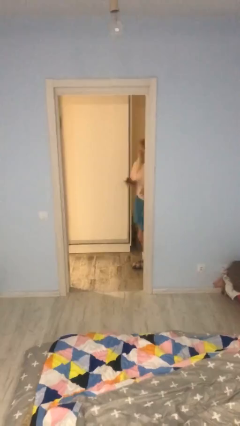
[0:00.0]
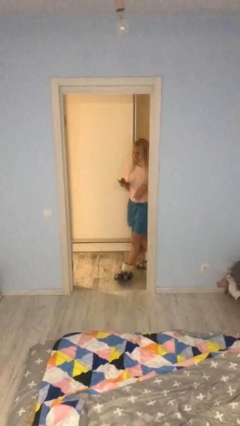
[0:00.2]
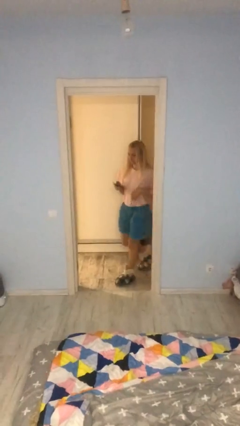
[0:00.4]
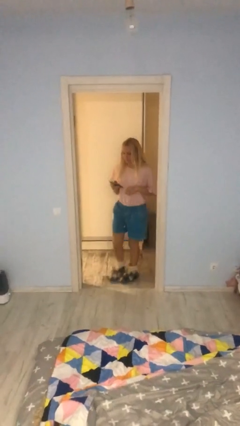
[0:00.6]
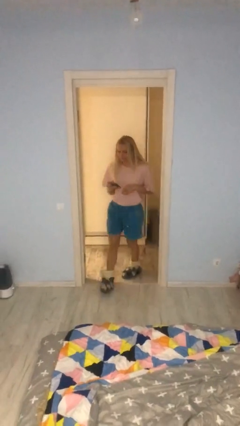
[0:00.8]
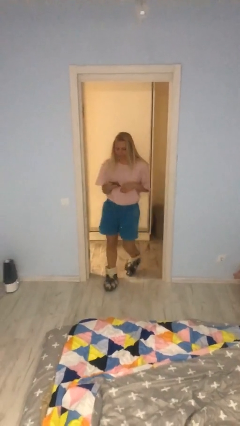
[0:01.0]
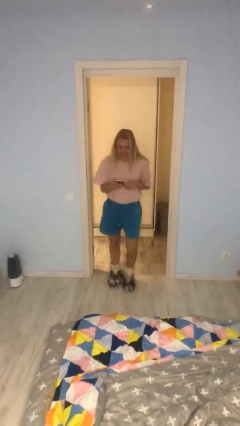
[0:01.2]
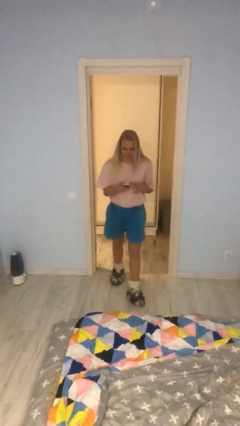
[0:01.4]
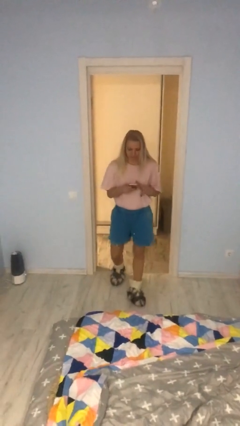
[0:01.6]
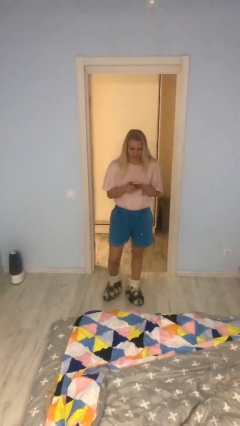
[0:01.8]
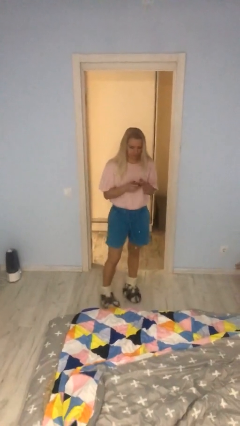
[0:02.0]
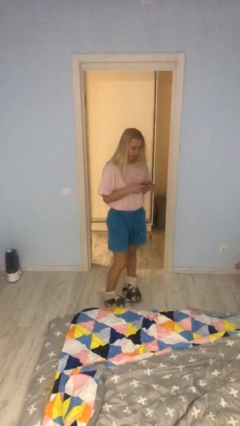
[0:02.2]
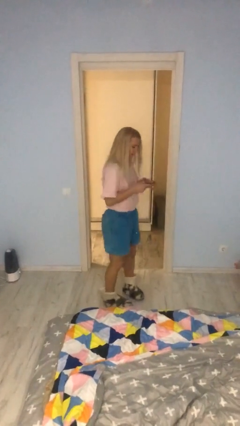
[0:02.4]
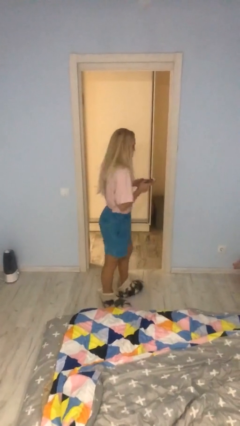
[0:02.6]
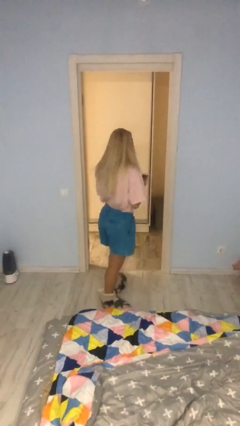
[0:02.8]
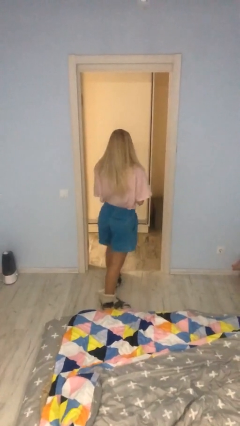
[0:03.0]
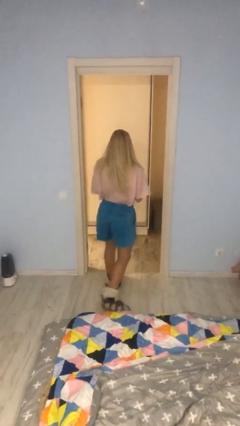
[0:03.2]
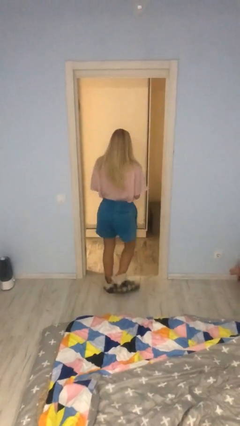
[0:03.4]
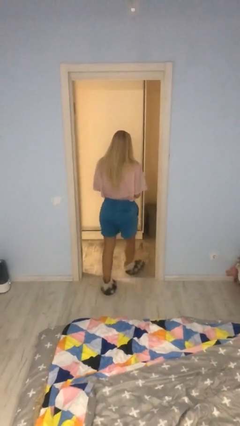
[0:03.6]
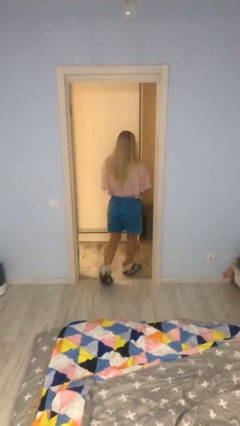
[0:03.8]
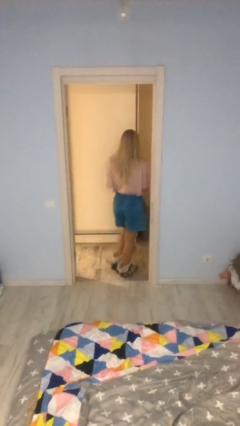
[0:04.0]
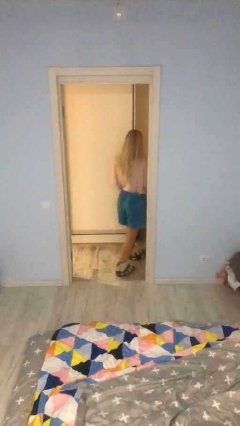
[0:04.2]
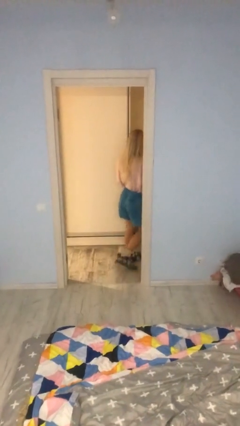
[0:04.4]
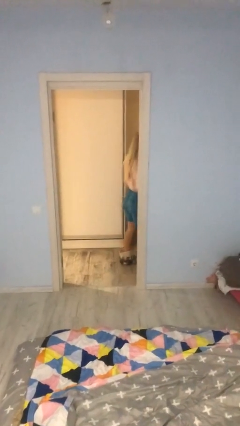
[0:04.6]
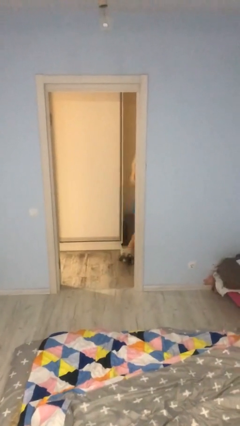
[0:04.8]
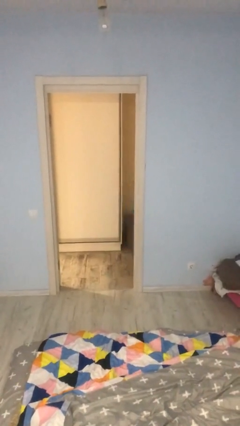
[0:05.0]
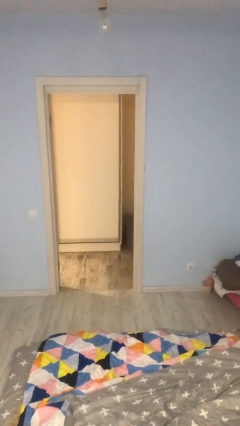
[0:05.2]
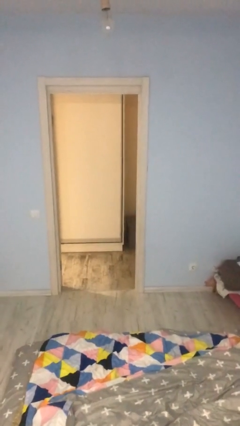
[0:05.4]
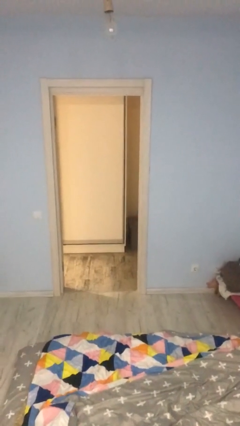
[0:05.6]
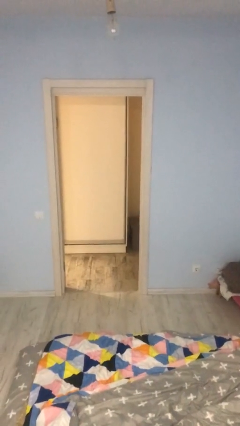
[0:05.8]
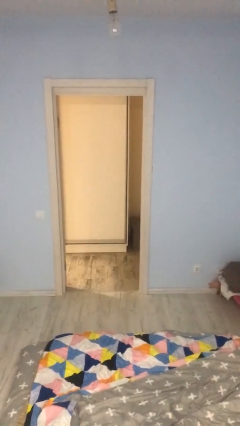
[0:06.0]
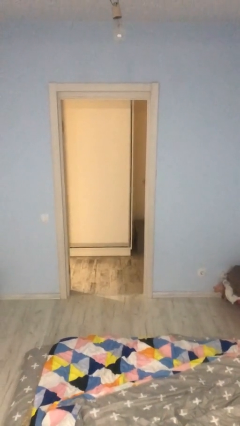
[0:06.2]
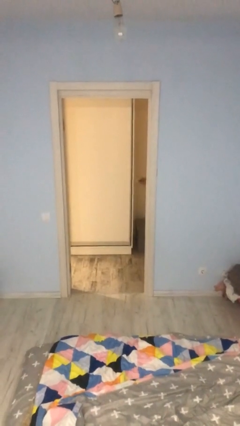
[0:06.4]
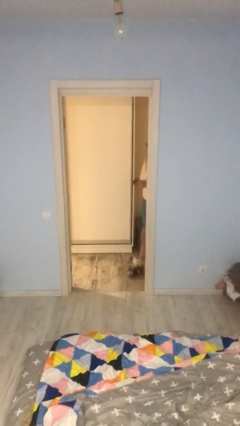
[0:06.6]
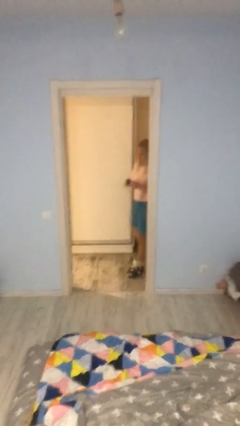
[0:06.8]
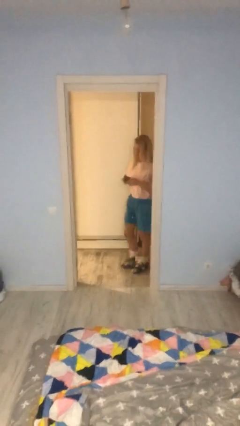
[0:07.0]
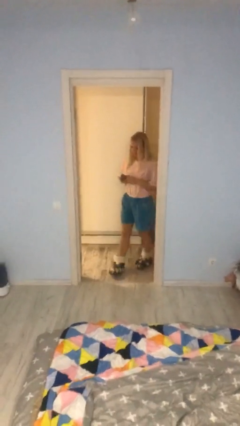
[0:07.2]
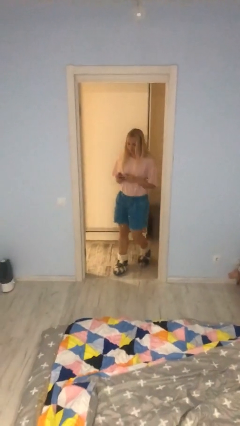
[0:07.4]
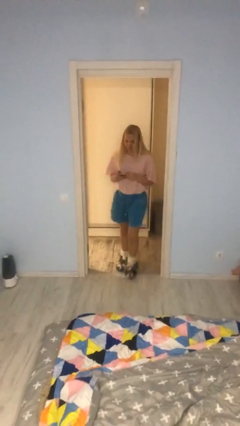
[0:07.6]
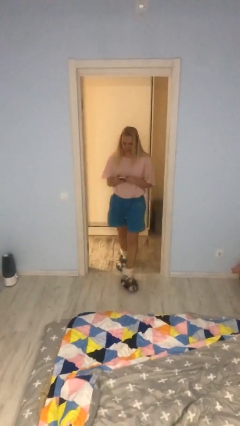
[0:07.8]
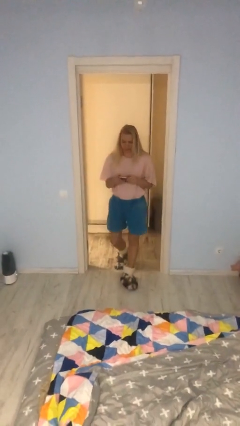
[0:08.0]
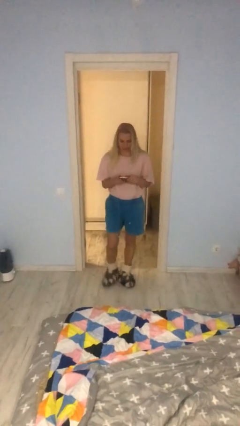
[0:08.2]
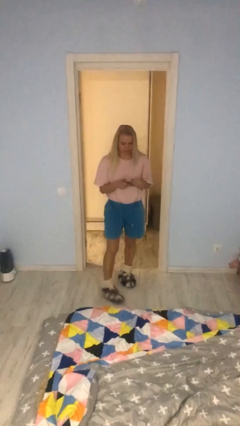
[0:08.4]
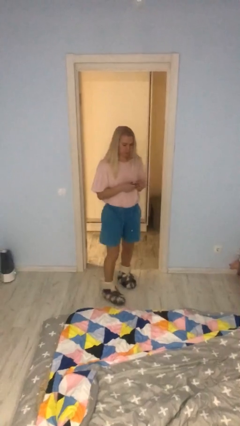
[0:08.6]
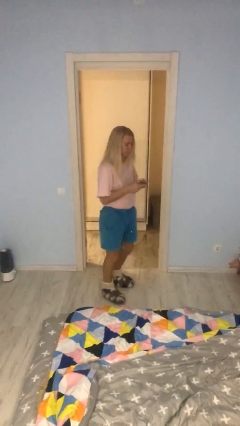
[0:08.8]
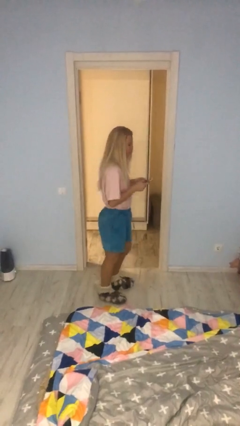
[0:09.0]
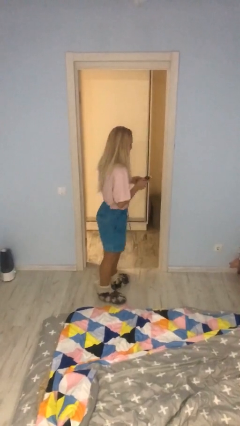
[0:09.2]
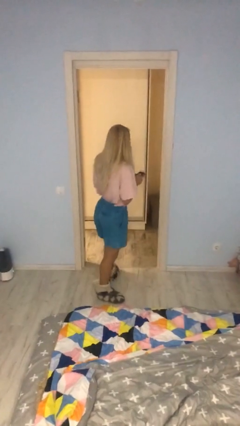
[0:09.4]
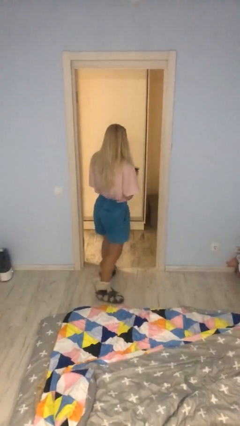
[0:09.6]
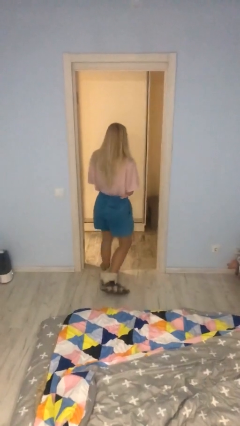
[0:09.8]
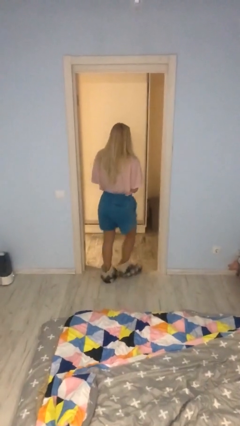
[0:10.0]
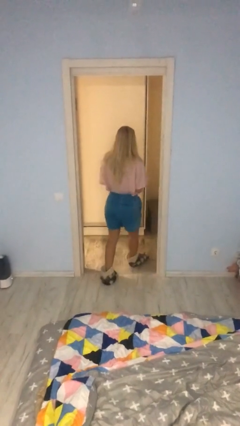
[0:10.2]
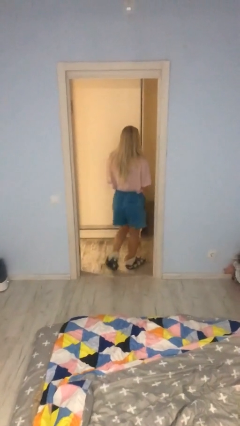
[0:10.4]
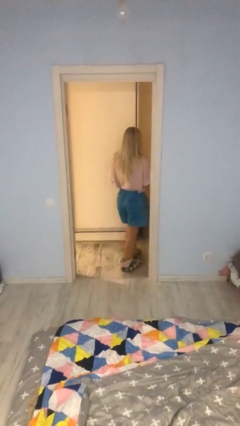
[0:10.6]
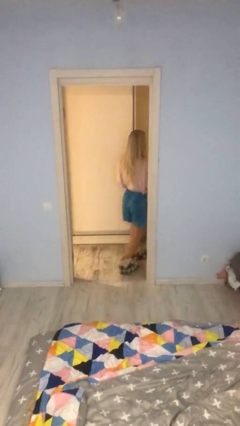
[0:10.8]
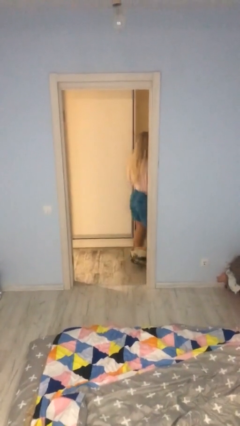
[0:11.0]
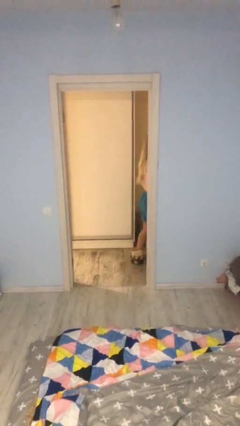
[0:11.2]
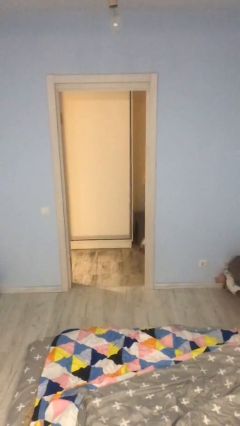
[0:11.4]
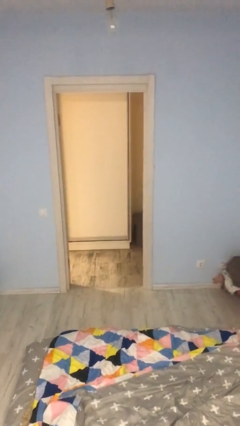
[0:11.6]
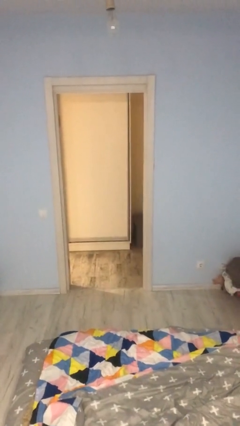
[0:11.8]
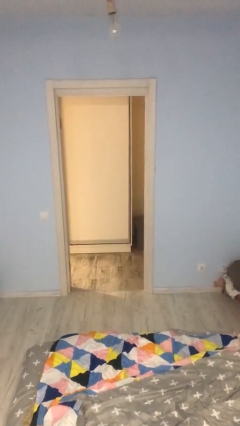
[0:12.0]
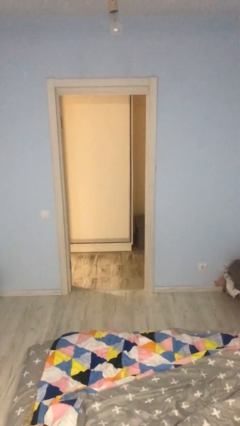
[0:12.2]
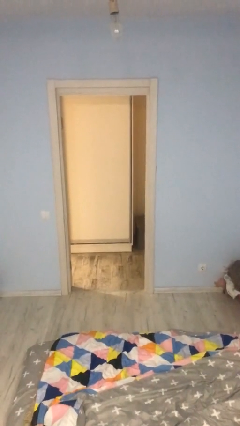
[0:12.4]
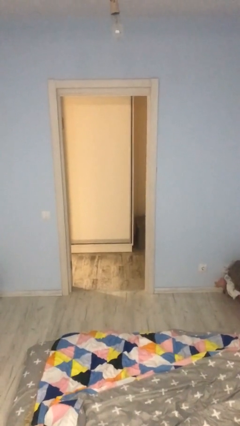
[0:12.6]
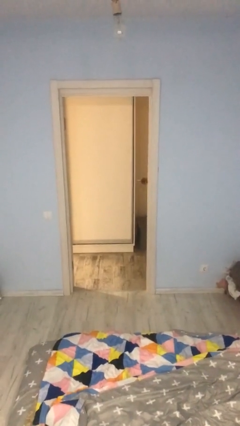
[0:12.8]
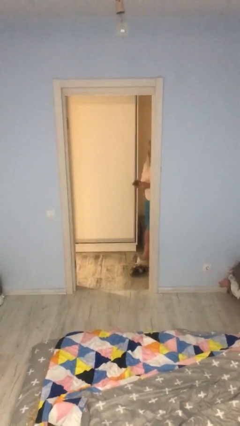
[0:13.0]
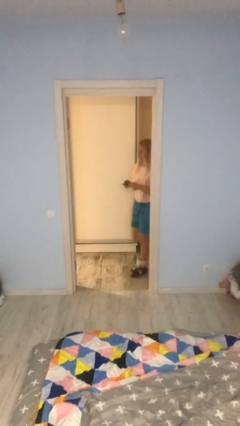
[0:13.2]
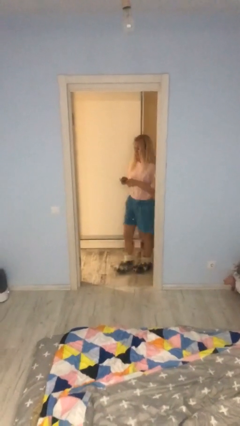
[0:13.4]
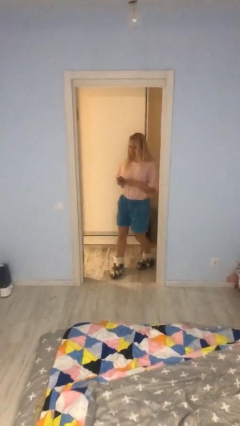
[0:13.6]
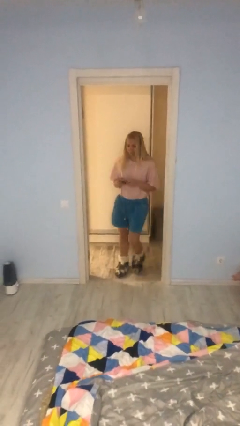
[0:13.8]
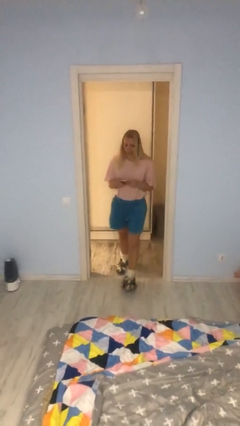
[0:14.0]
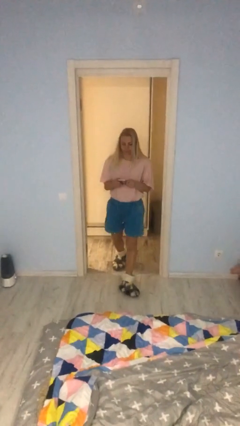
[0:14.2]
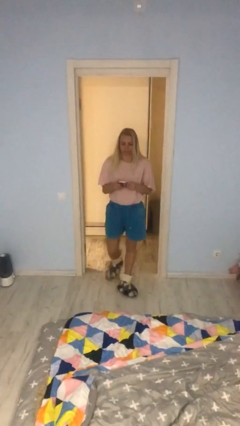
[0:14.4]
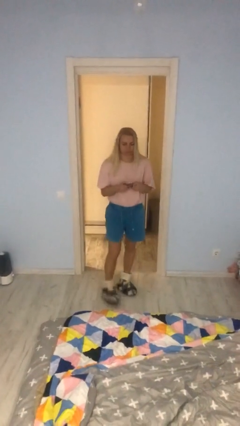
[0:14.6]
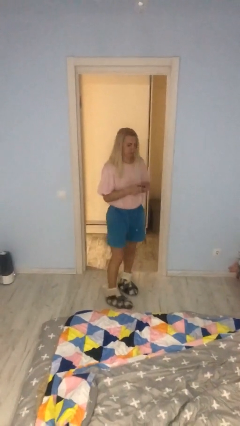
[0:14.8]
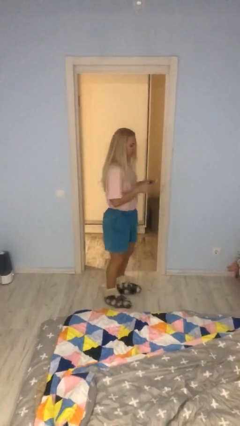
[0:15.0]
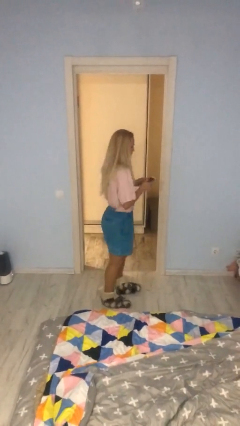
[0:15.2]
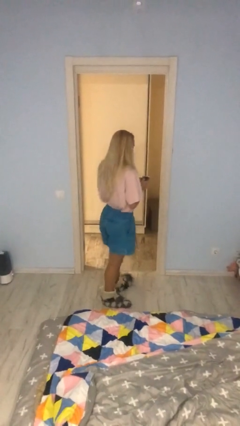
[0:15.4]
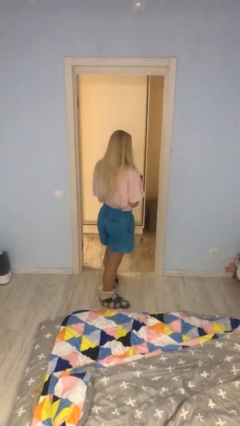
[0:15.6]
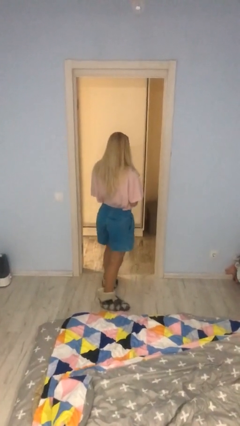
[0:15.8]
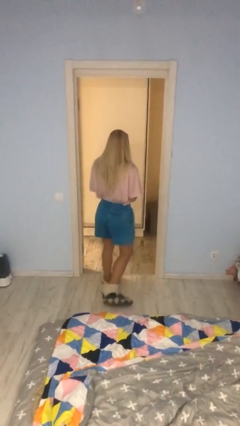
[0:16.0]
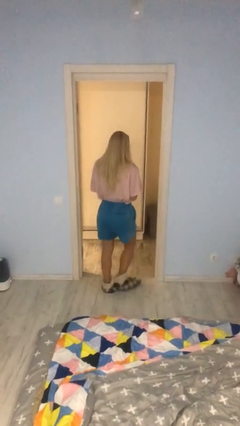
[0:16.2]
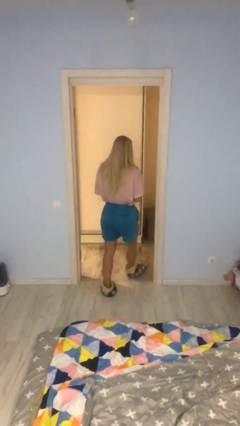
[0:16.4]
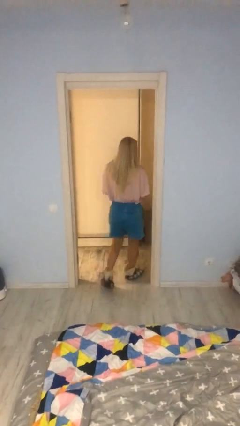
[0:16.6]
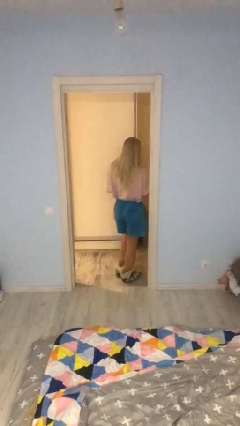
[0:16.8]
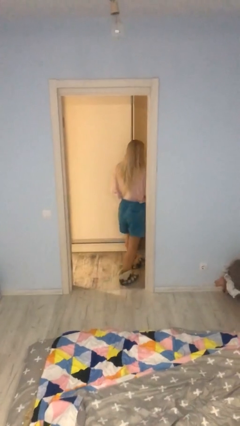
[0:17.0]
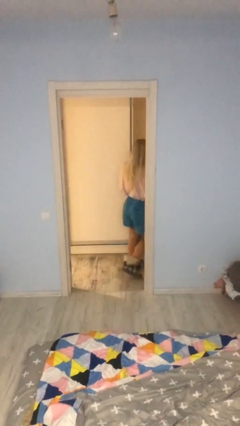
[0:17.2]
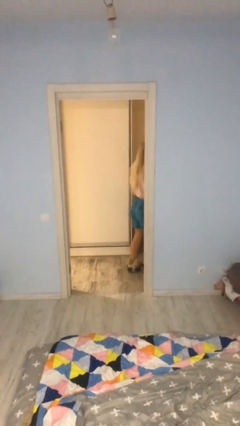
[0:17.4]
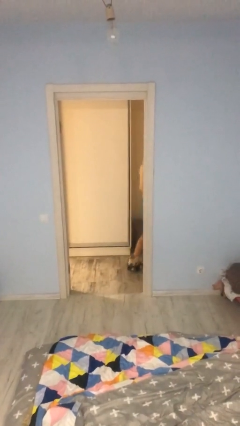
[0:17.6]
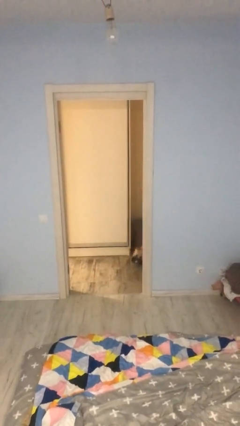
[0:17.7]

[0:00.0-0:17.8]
person texts on phone

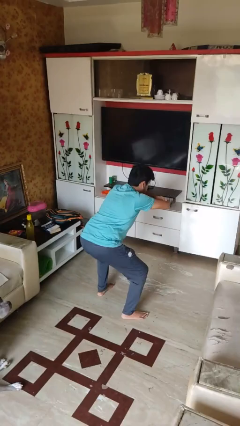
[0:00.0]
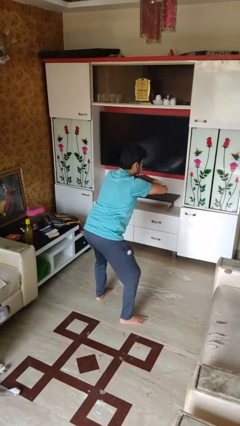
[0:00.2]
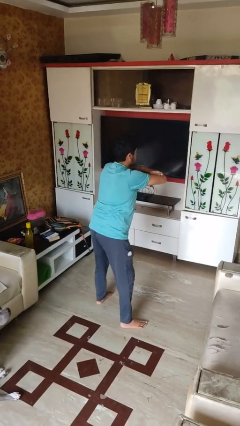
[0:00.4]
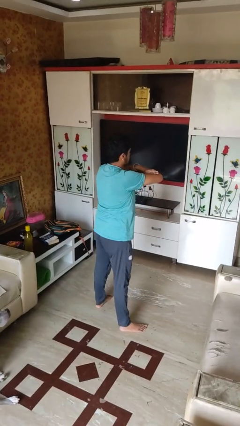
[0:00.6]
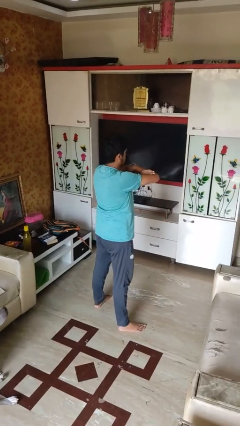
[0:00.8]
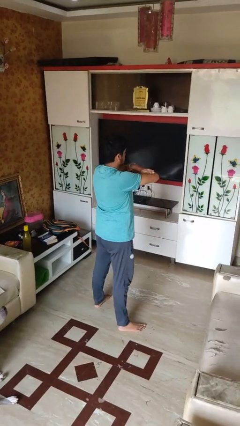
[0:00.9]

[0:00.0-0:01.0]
person stands up
